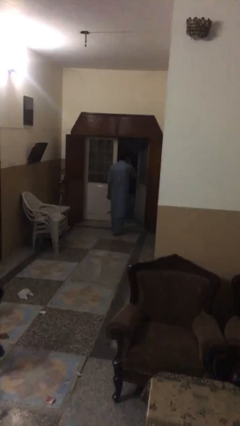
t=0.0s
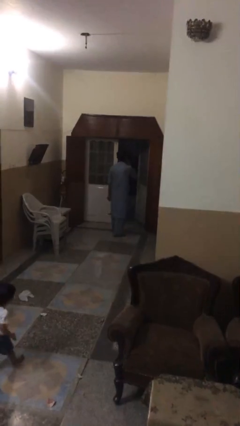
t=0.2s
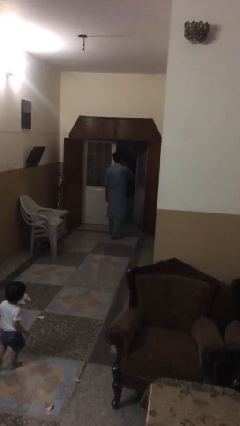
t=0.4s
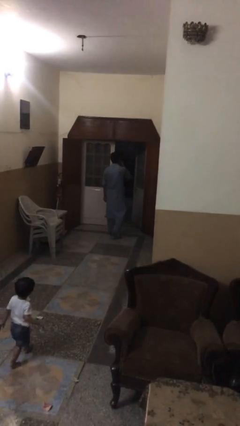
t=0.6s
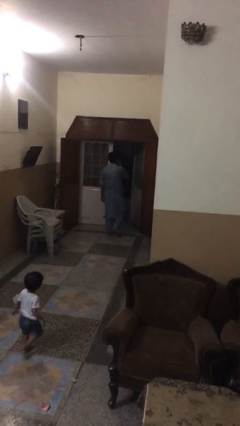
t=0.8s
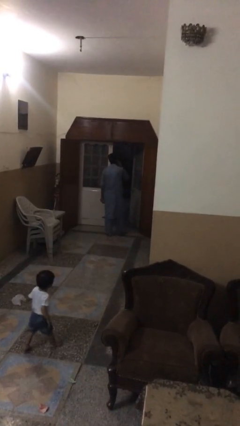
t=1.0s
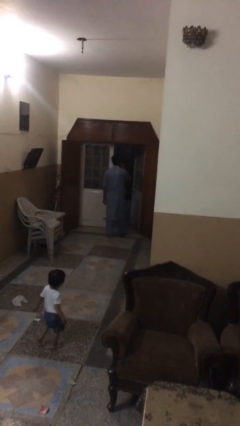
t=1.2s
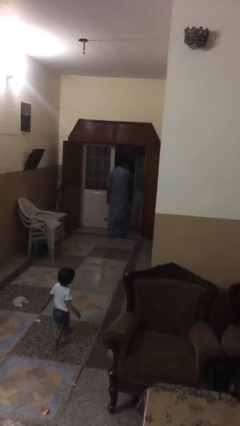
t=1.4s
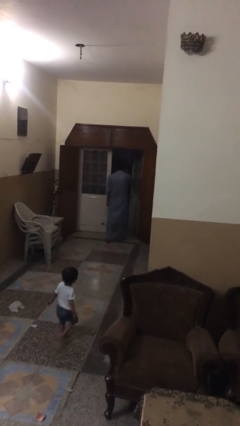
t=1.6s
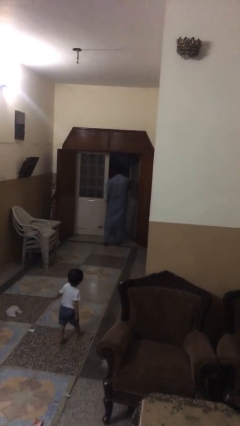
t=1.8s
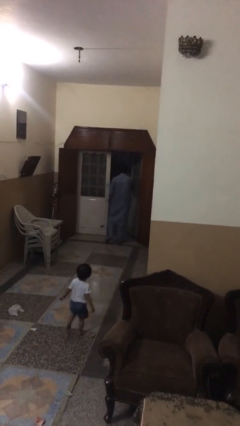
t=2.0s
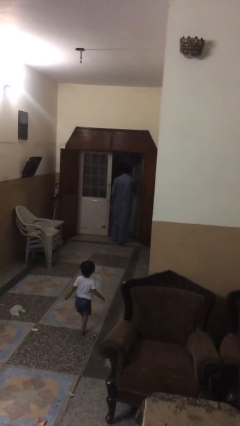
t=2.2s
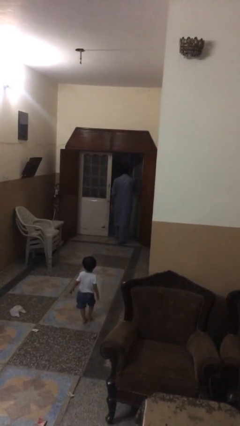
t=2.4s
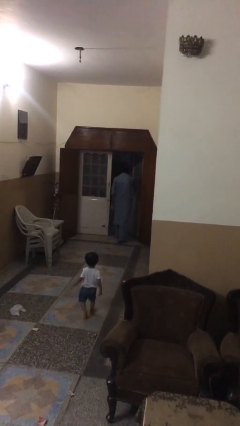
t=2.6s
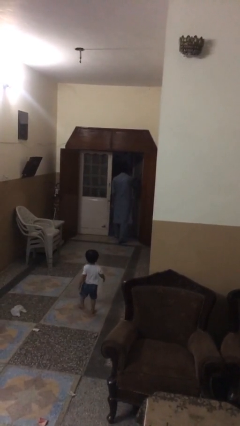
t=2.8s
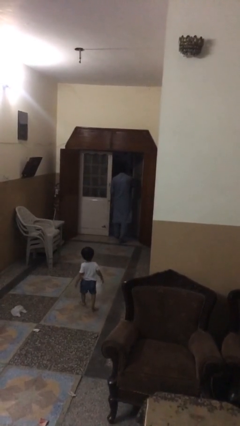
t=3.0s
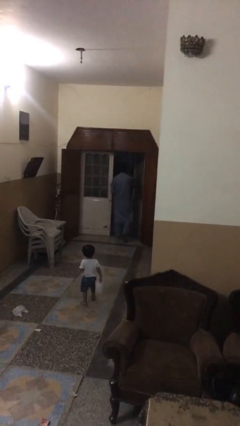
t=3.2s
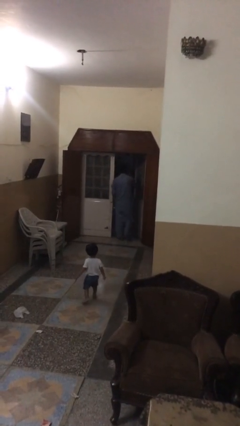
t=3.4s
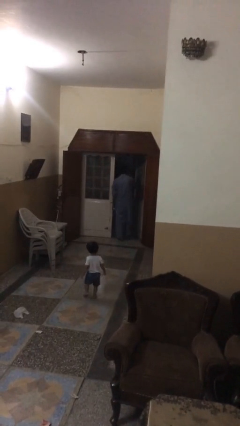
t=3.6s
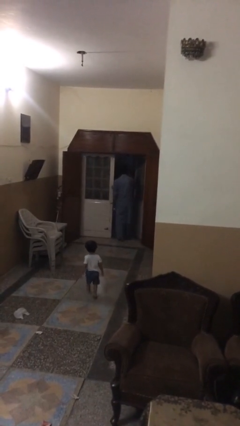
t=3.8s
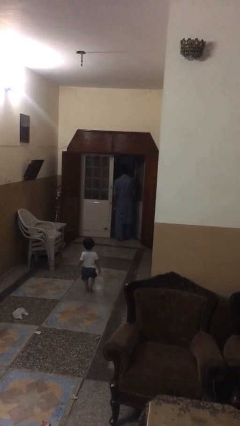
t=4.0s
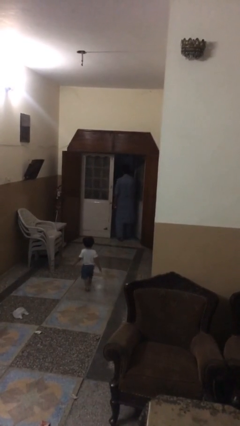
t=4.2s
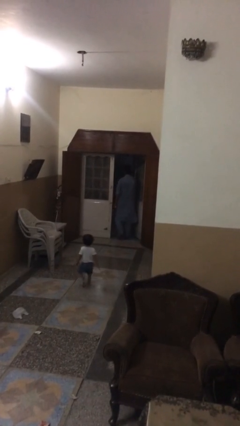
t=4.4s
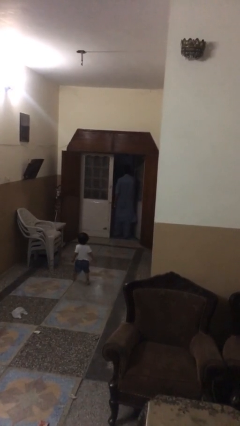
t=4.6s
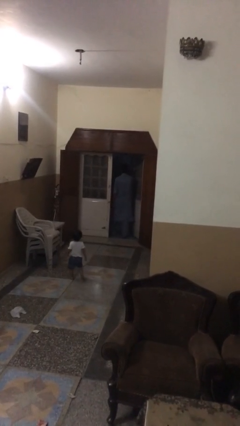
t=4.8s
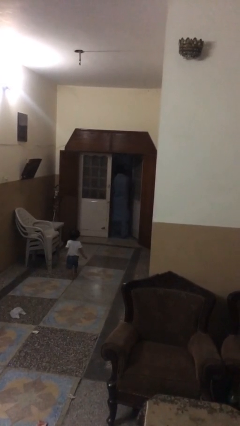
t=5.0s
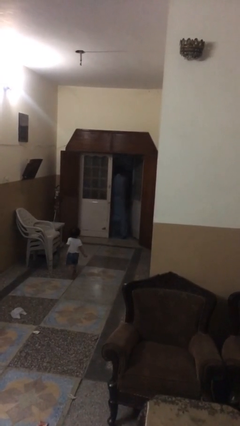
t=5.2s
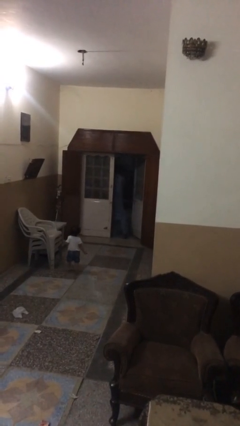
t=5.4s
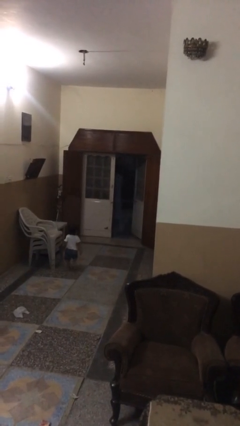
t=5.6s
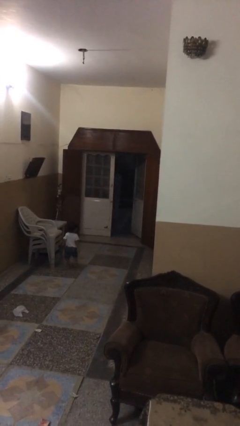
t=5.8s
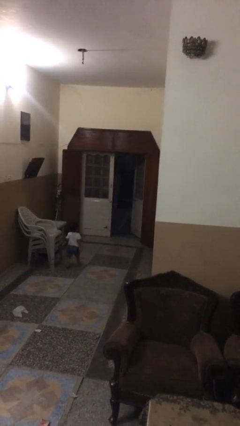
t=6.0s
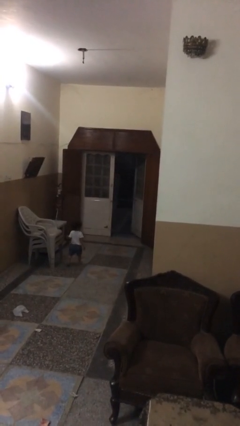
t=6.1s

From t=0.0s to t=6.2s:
person exits scene through structure

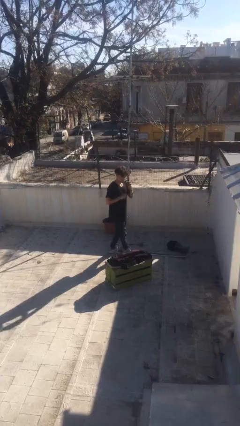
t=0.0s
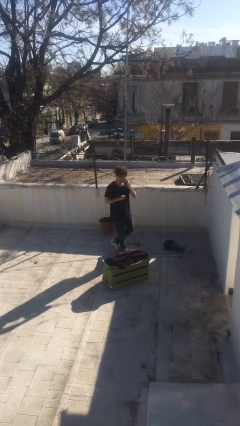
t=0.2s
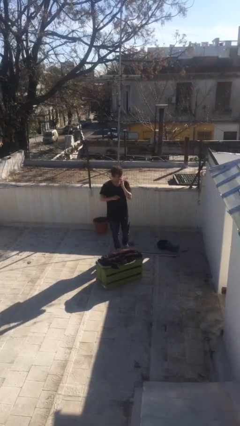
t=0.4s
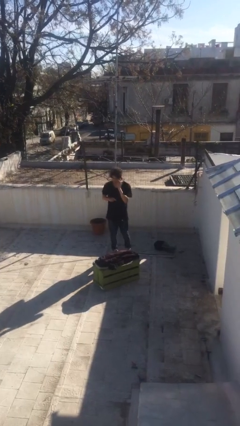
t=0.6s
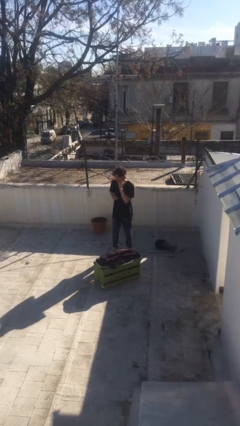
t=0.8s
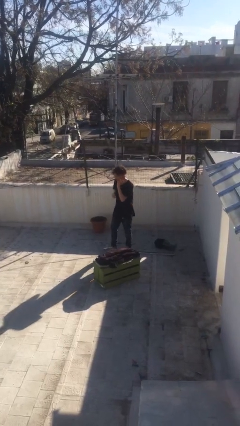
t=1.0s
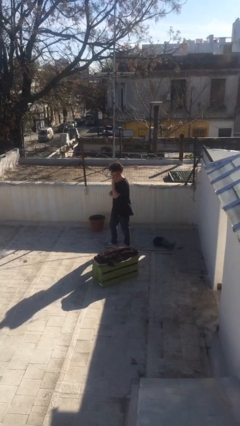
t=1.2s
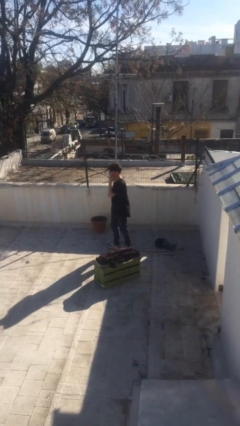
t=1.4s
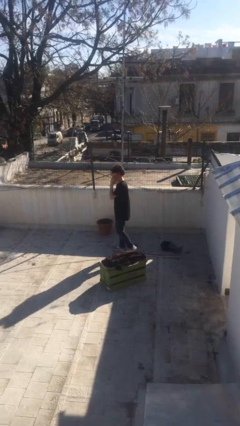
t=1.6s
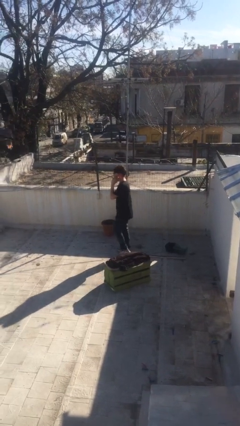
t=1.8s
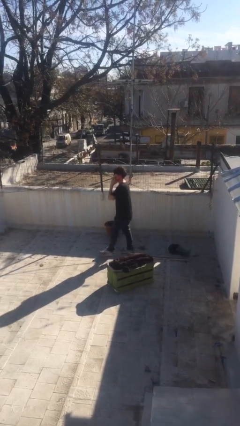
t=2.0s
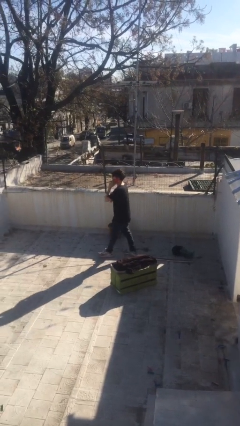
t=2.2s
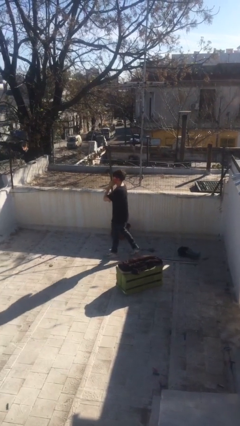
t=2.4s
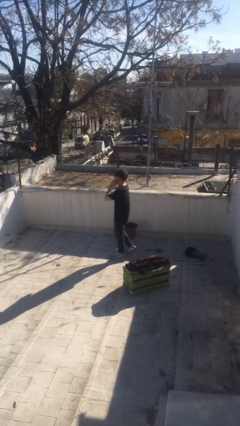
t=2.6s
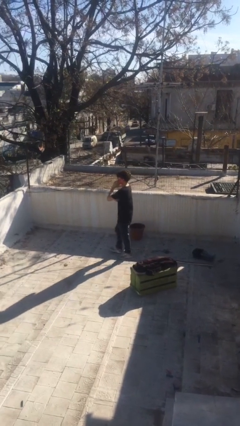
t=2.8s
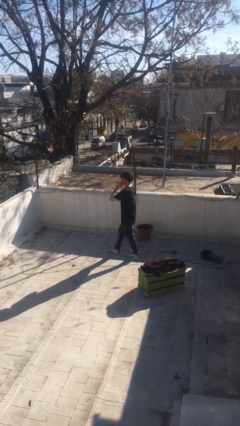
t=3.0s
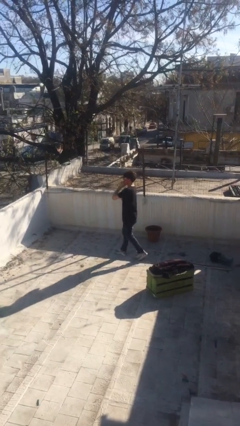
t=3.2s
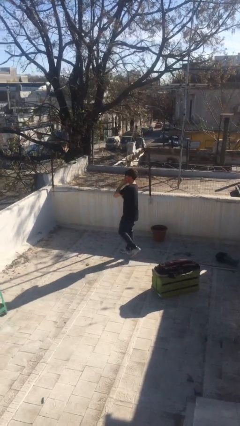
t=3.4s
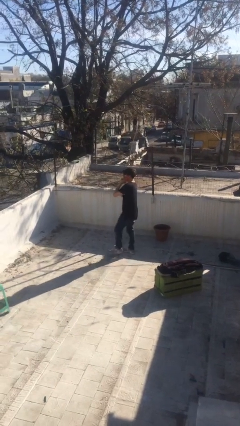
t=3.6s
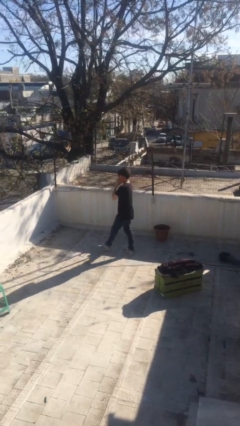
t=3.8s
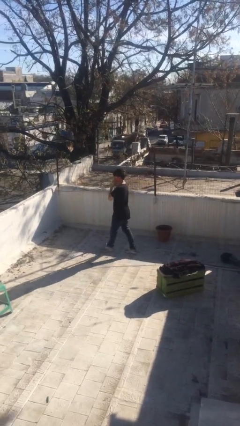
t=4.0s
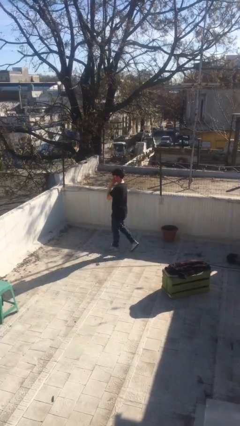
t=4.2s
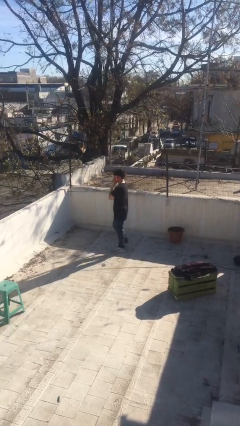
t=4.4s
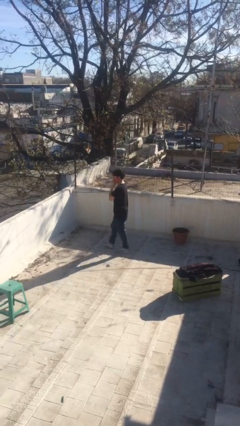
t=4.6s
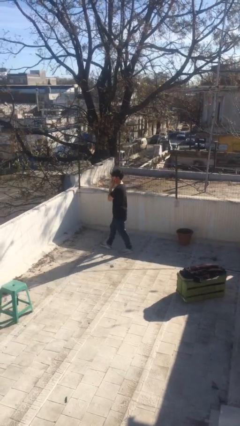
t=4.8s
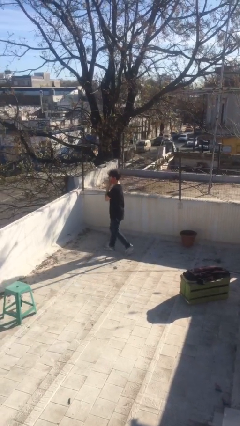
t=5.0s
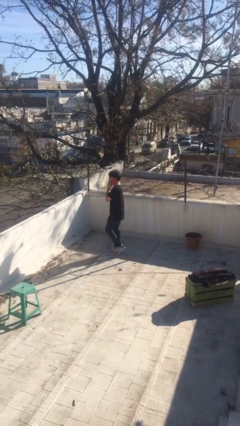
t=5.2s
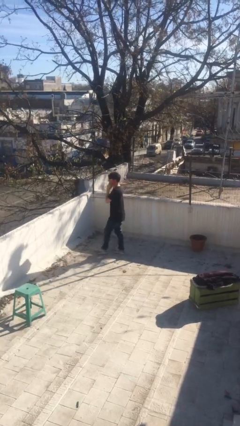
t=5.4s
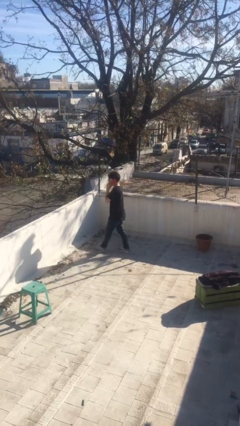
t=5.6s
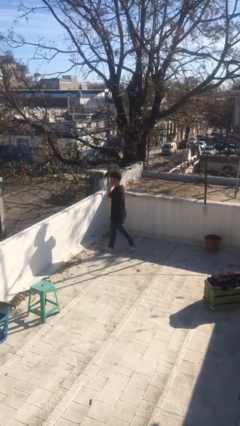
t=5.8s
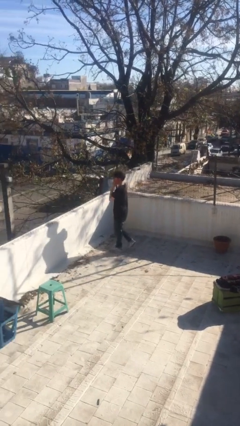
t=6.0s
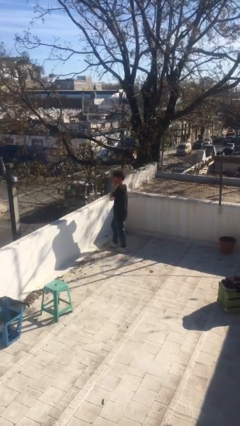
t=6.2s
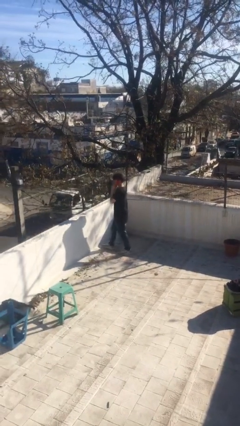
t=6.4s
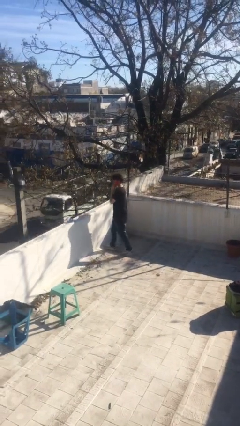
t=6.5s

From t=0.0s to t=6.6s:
person talks on phone

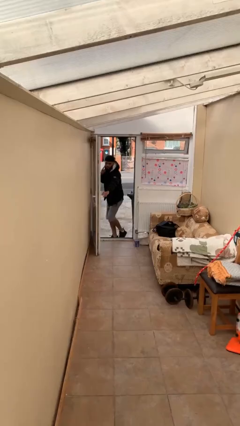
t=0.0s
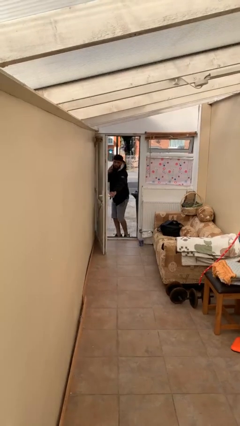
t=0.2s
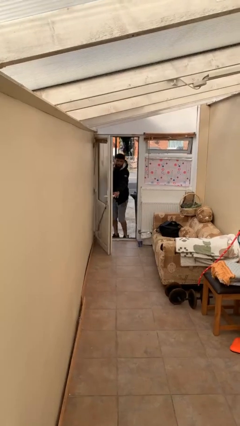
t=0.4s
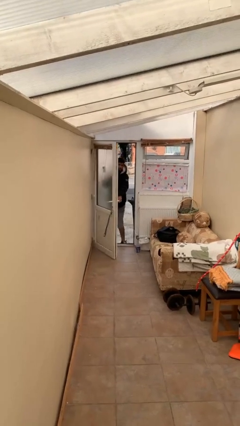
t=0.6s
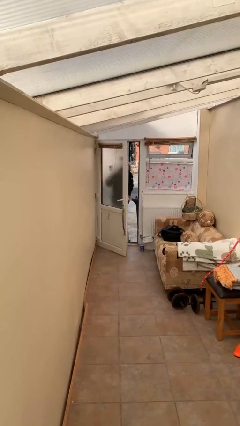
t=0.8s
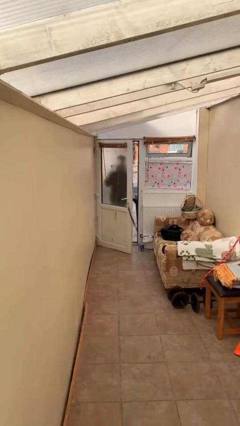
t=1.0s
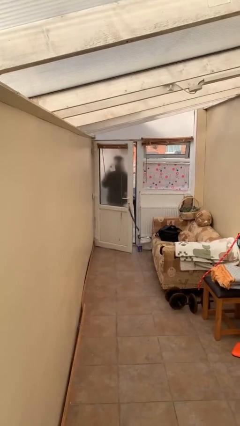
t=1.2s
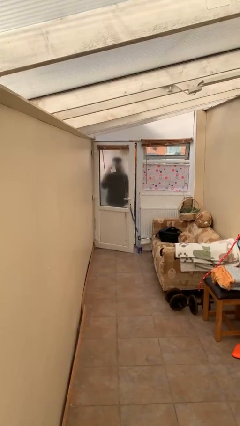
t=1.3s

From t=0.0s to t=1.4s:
person closes facility door

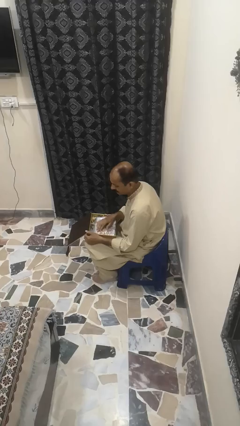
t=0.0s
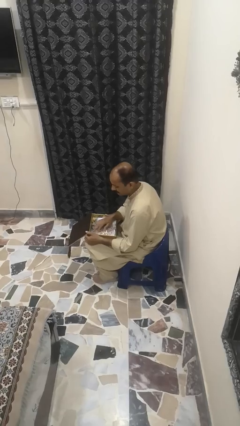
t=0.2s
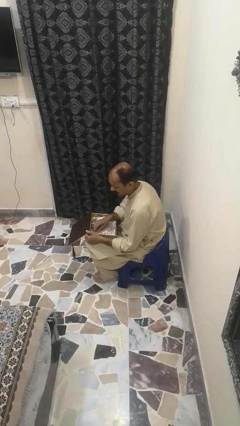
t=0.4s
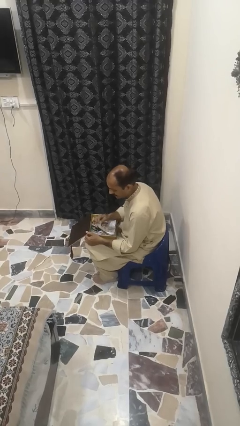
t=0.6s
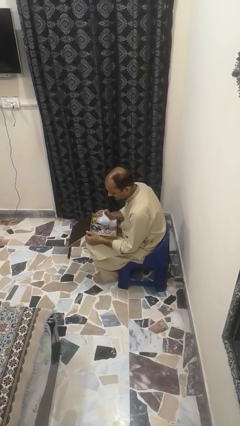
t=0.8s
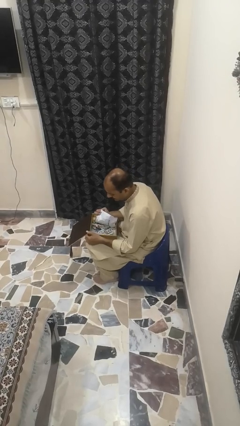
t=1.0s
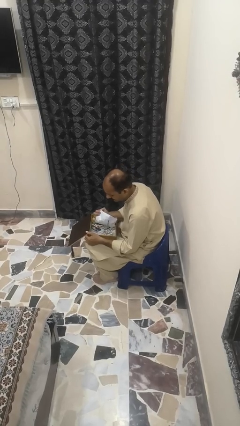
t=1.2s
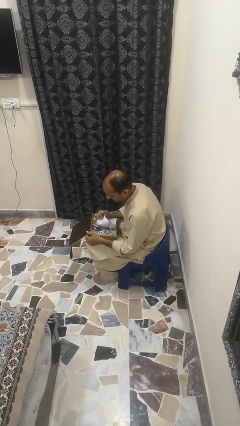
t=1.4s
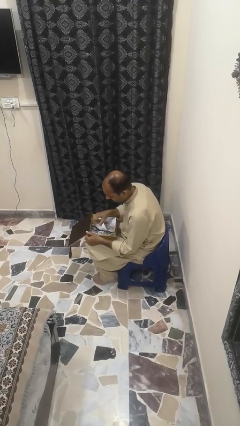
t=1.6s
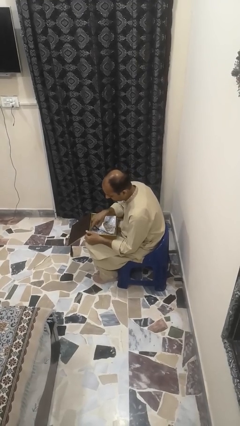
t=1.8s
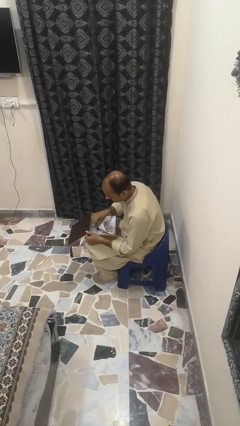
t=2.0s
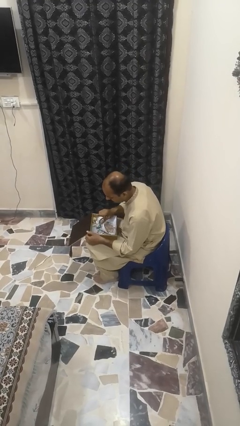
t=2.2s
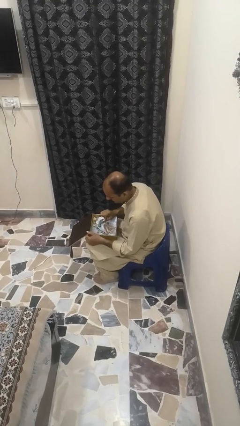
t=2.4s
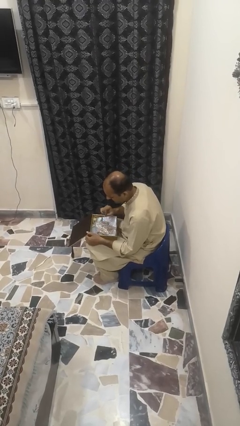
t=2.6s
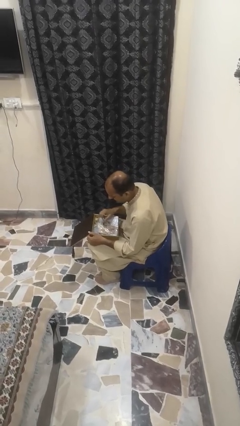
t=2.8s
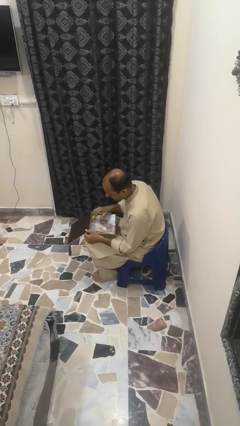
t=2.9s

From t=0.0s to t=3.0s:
person searches jewelry box

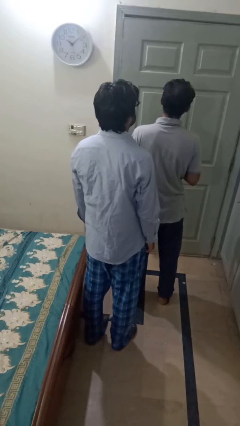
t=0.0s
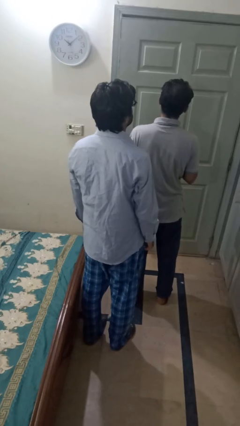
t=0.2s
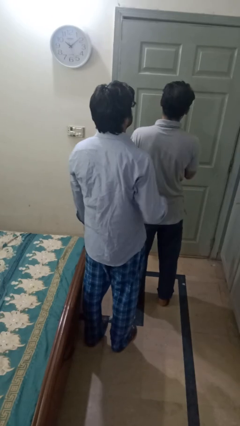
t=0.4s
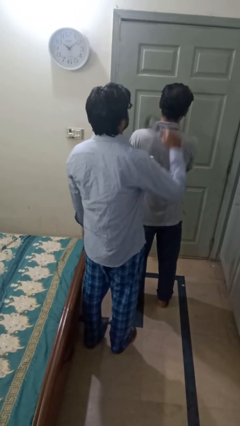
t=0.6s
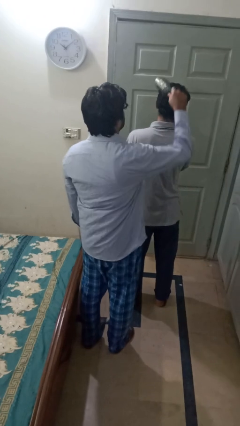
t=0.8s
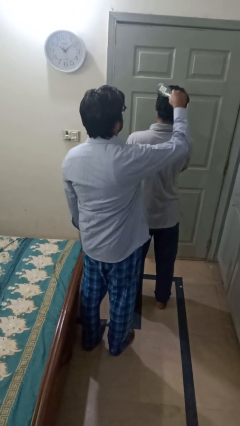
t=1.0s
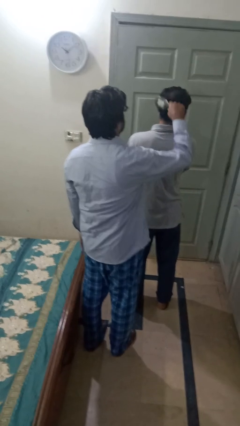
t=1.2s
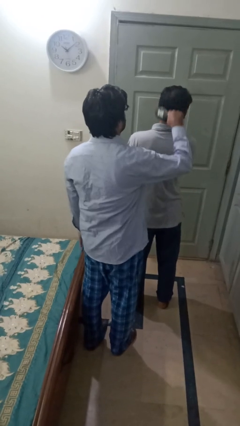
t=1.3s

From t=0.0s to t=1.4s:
person brushes hair of person
